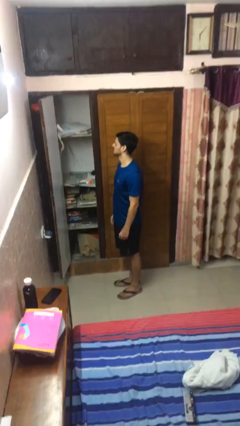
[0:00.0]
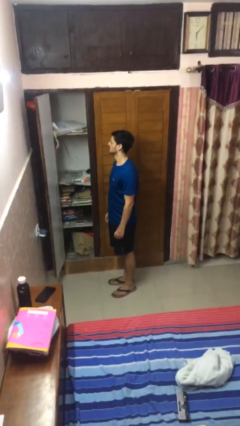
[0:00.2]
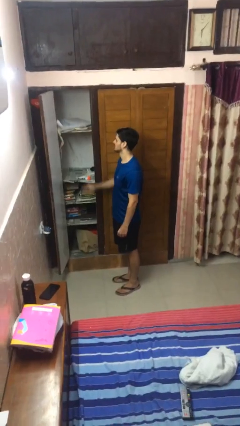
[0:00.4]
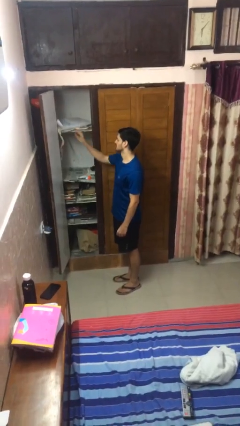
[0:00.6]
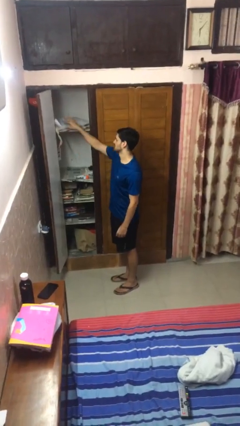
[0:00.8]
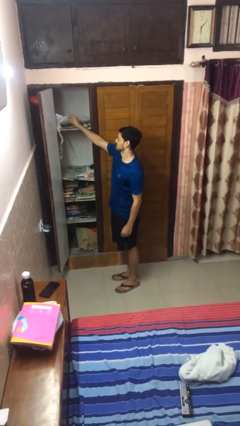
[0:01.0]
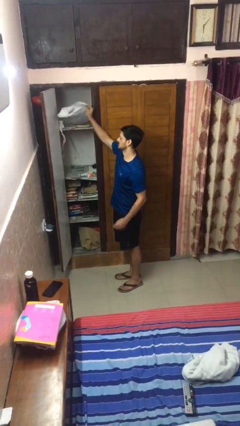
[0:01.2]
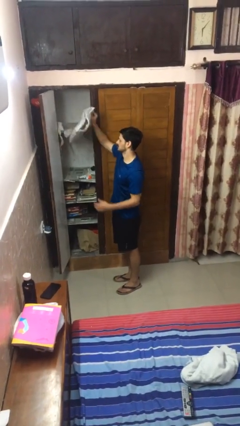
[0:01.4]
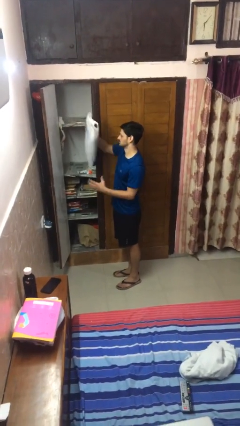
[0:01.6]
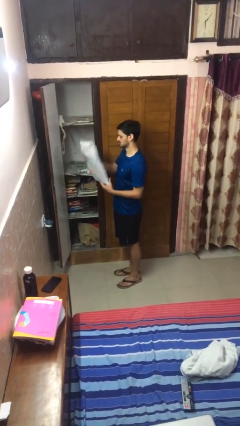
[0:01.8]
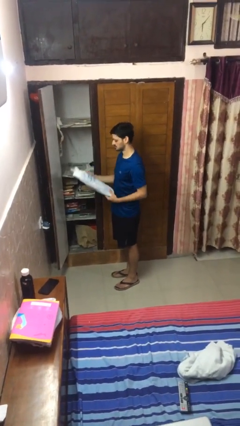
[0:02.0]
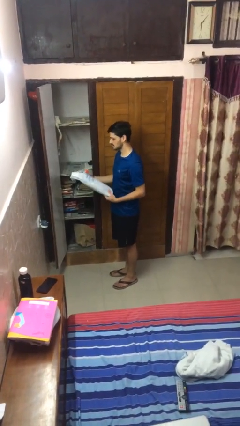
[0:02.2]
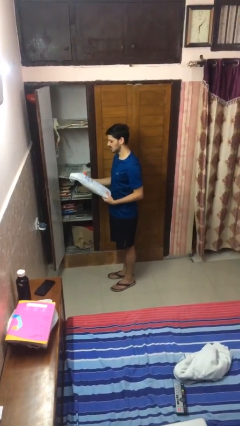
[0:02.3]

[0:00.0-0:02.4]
person picks up object from shelf

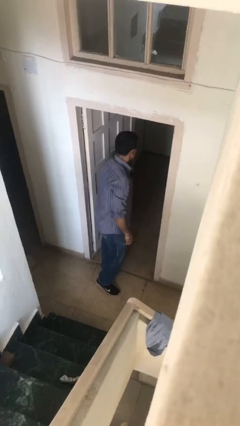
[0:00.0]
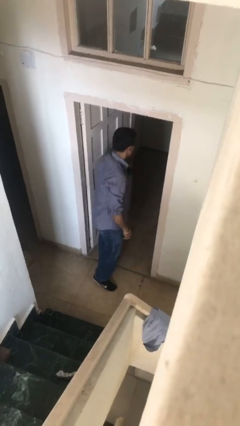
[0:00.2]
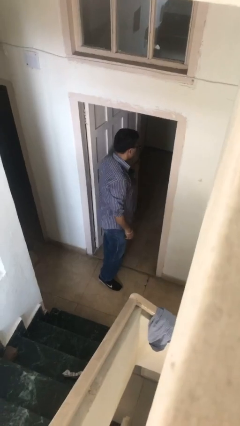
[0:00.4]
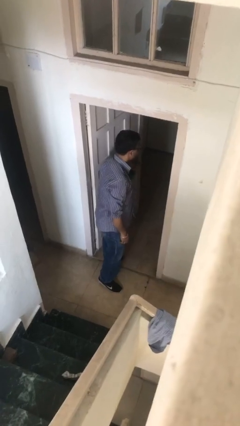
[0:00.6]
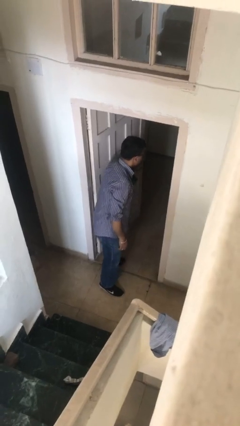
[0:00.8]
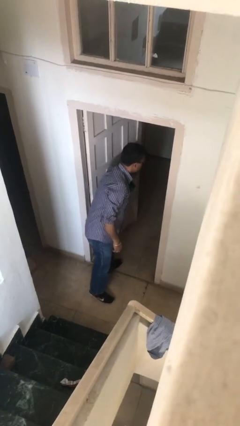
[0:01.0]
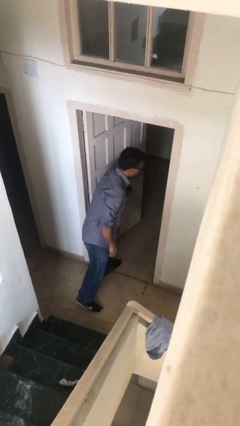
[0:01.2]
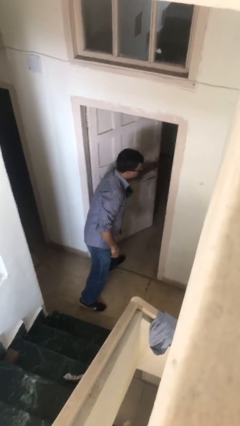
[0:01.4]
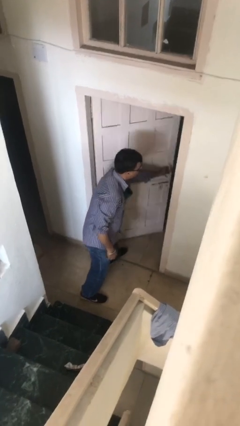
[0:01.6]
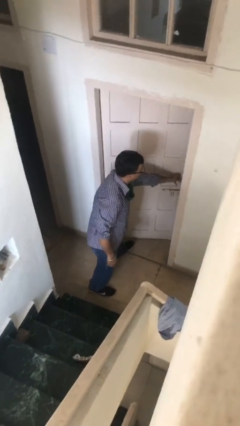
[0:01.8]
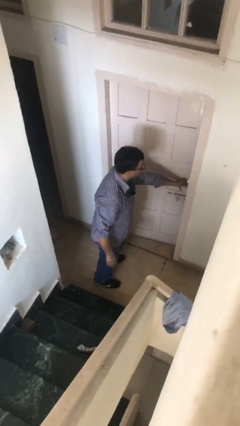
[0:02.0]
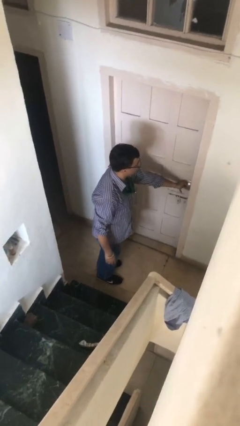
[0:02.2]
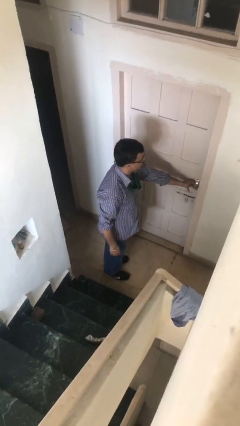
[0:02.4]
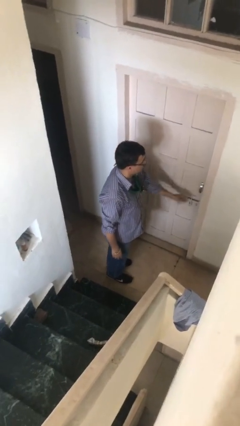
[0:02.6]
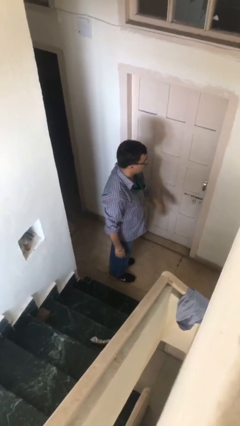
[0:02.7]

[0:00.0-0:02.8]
person closes facility door

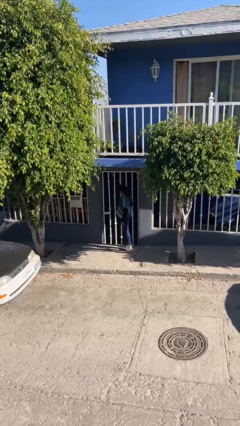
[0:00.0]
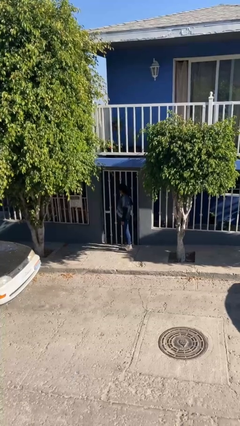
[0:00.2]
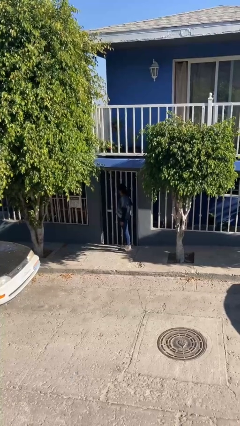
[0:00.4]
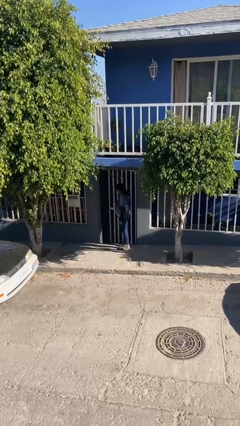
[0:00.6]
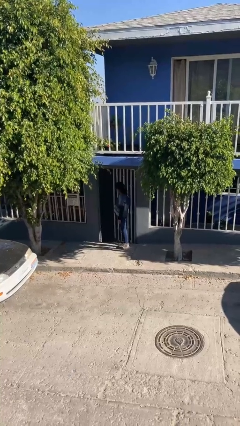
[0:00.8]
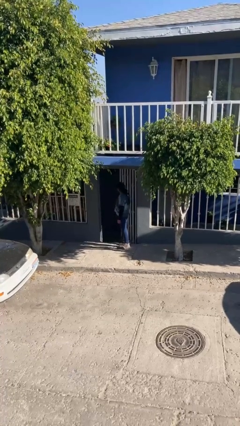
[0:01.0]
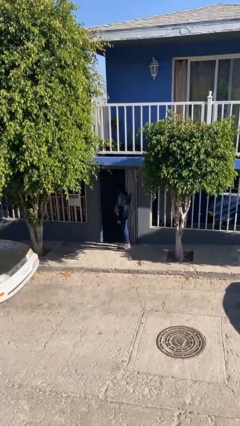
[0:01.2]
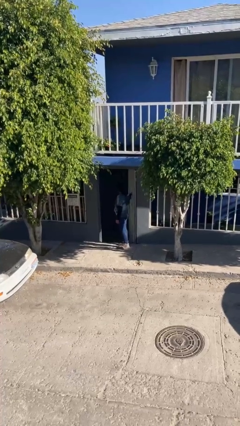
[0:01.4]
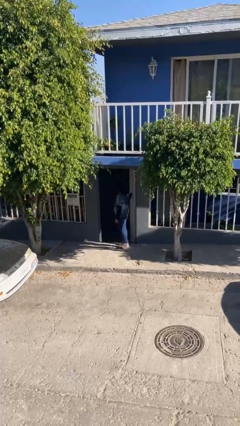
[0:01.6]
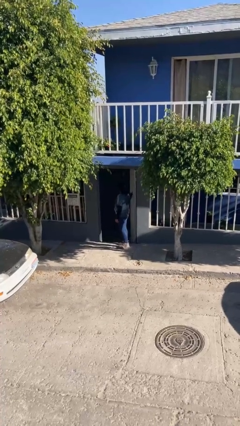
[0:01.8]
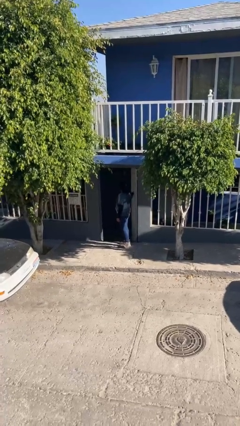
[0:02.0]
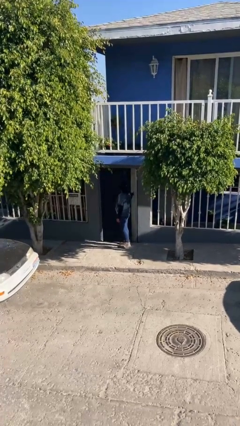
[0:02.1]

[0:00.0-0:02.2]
person opens facility door

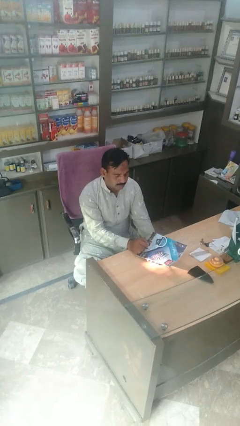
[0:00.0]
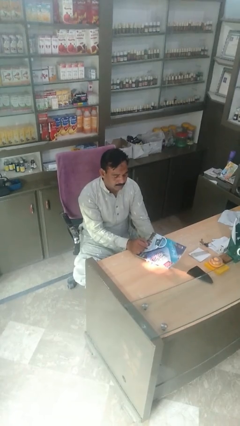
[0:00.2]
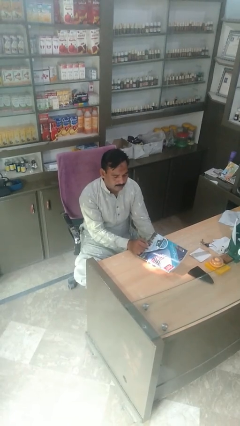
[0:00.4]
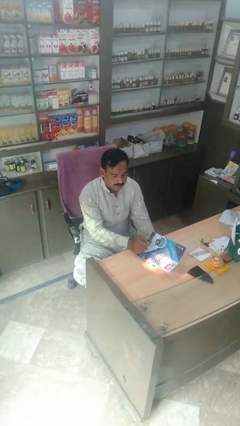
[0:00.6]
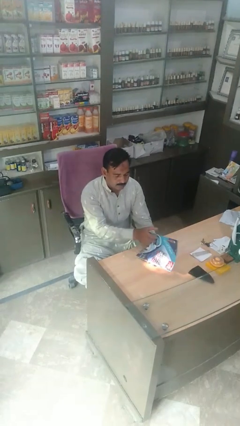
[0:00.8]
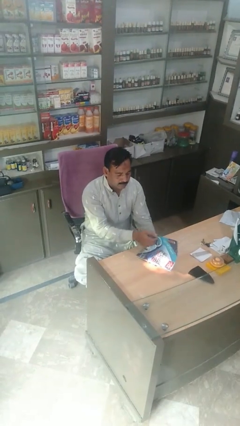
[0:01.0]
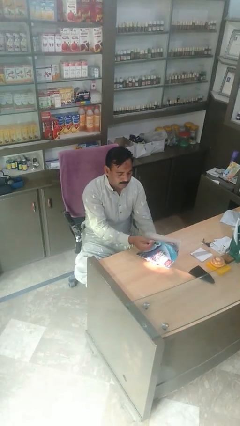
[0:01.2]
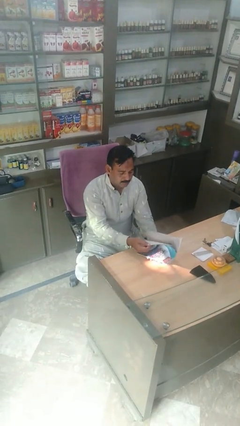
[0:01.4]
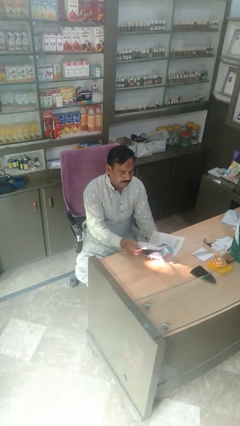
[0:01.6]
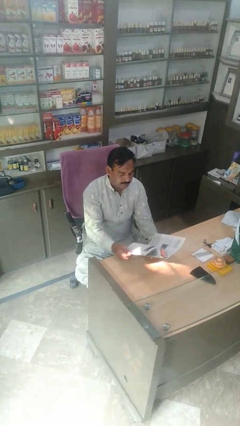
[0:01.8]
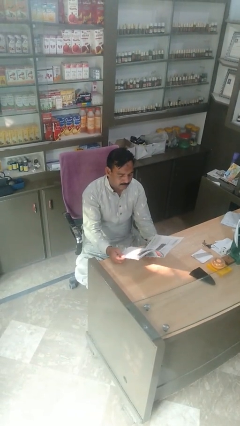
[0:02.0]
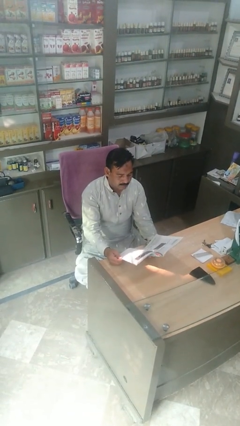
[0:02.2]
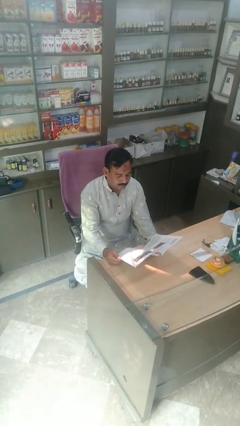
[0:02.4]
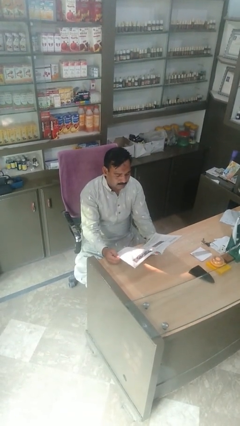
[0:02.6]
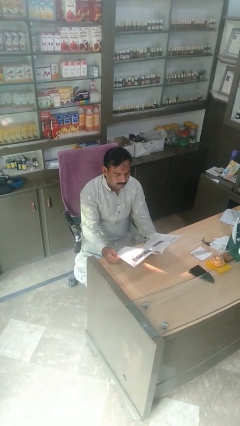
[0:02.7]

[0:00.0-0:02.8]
person reads magazine

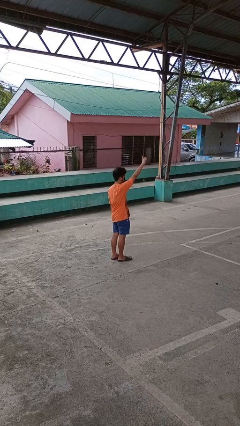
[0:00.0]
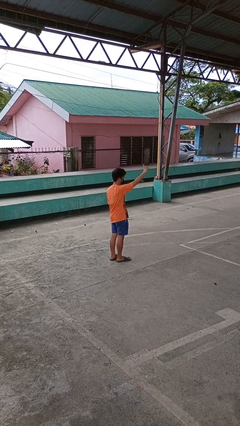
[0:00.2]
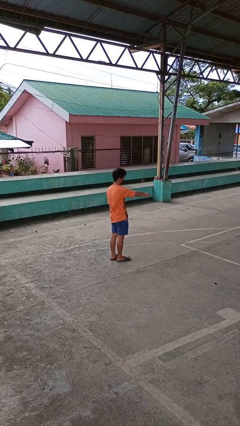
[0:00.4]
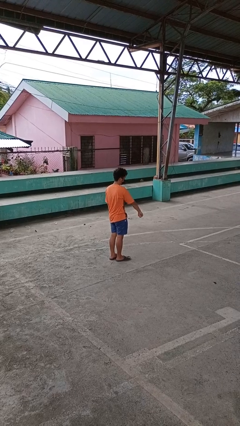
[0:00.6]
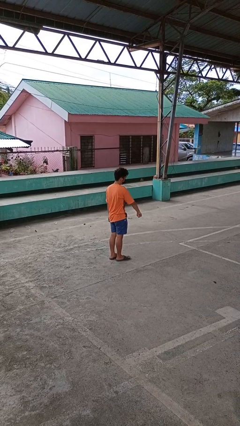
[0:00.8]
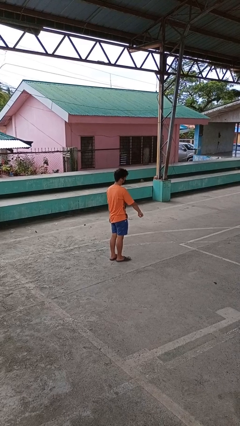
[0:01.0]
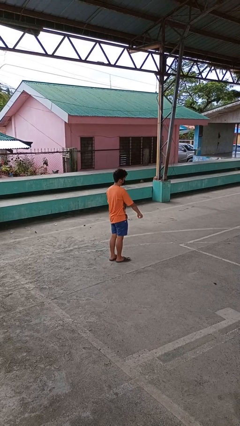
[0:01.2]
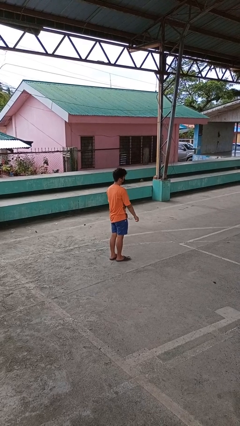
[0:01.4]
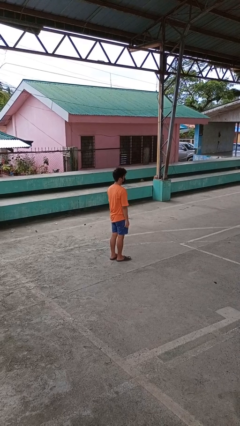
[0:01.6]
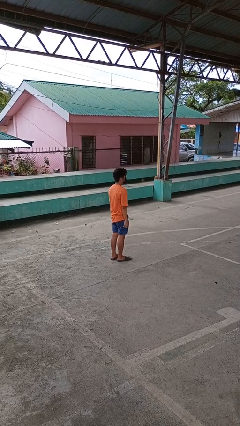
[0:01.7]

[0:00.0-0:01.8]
person gestures swipe down

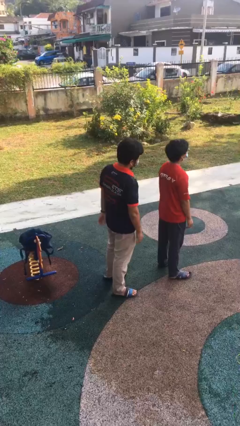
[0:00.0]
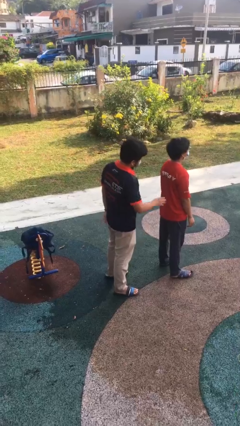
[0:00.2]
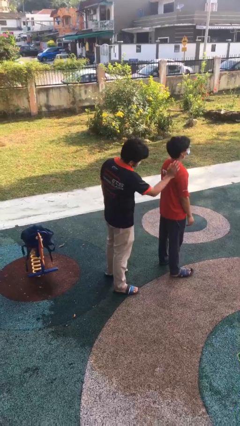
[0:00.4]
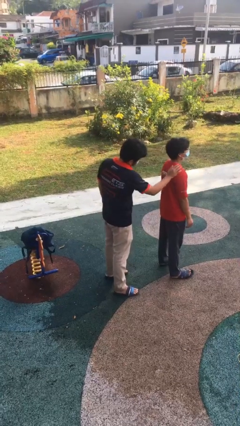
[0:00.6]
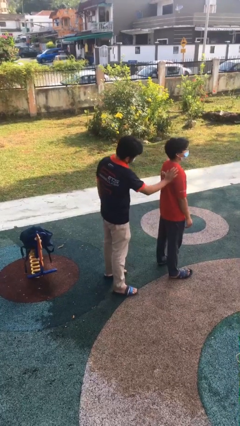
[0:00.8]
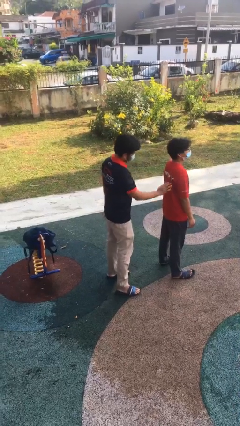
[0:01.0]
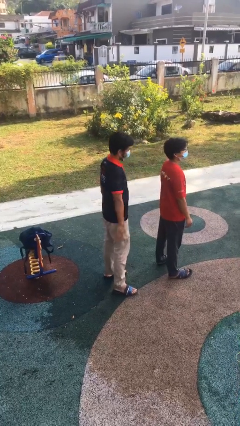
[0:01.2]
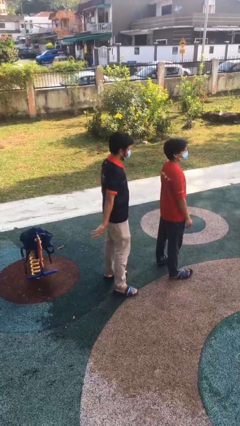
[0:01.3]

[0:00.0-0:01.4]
person touches back of person

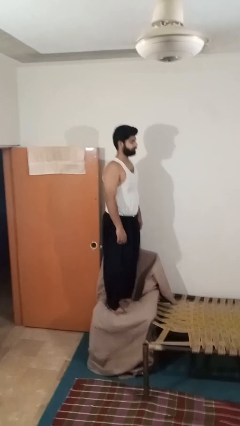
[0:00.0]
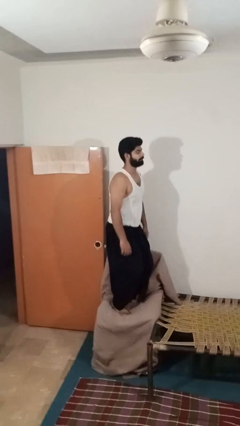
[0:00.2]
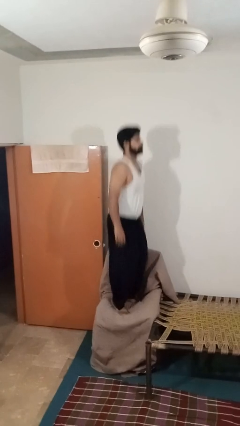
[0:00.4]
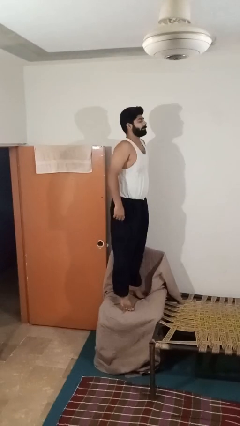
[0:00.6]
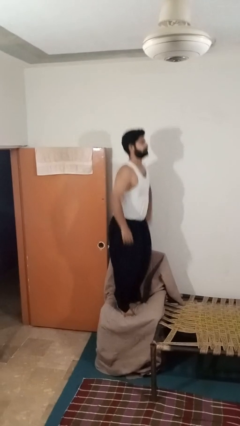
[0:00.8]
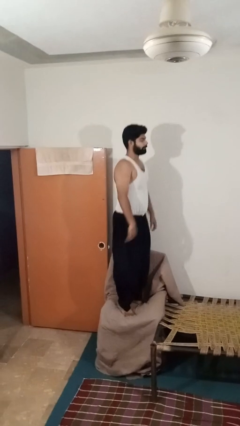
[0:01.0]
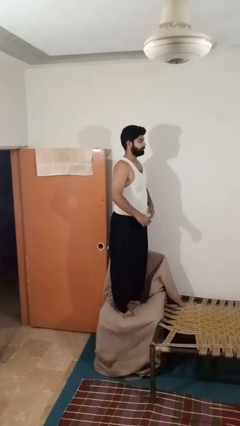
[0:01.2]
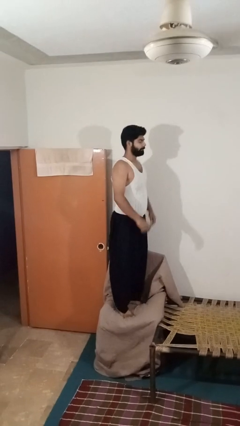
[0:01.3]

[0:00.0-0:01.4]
person jumps on couch

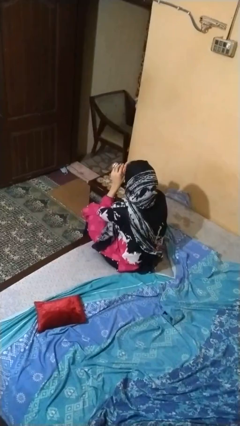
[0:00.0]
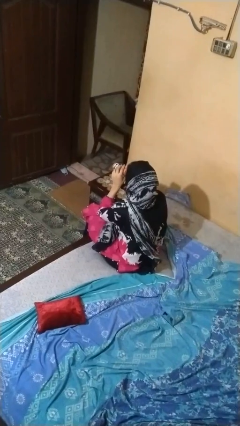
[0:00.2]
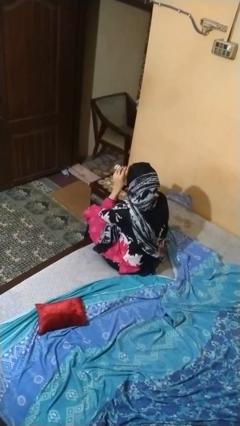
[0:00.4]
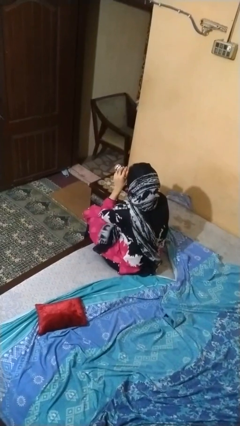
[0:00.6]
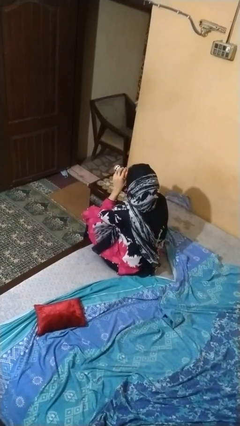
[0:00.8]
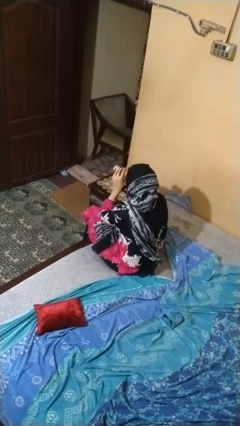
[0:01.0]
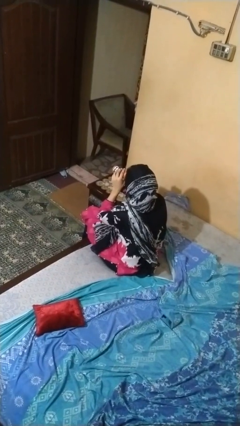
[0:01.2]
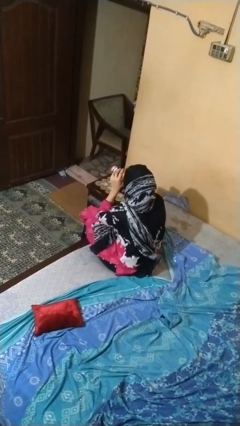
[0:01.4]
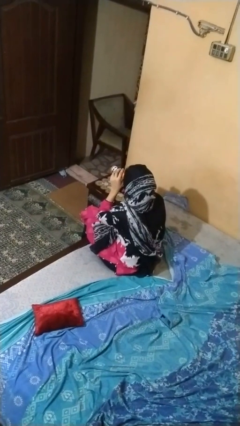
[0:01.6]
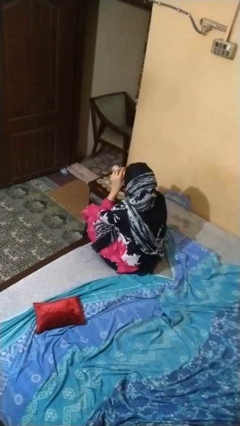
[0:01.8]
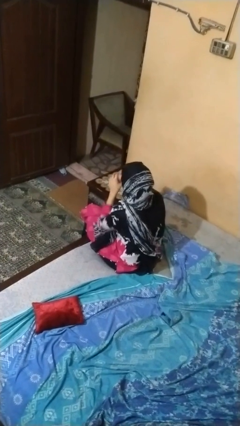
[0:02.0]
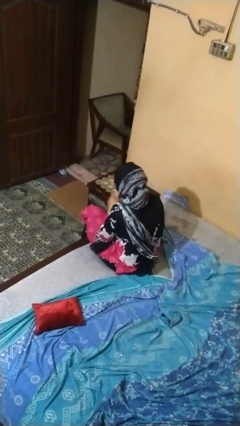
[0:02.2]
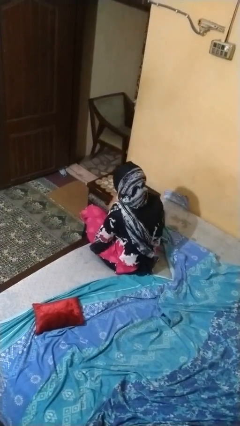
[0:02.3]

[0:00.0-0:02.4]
person drinks from beverage can
